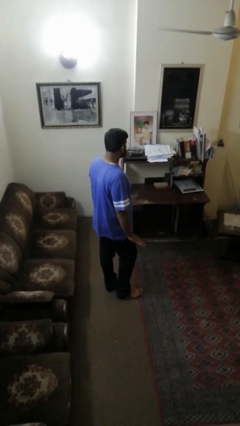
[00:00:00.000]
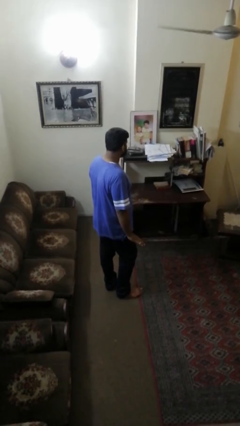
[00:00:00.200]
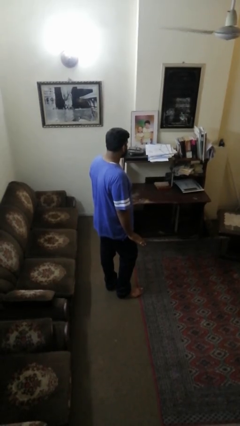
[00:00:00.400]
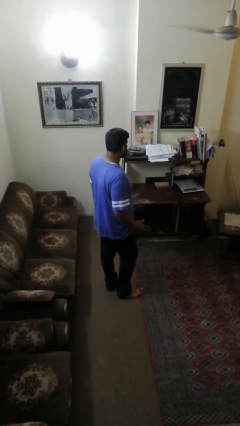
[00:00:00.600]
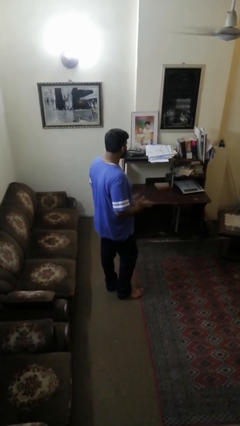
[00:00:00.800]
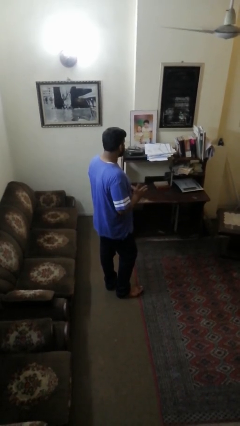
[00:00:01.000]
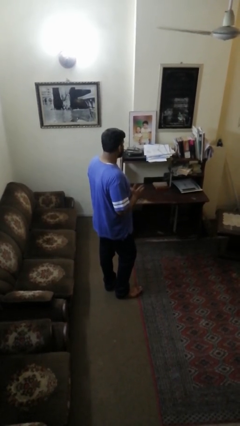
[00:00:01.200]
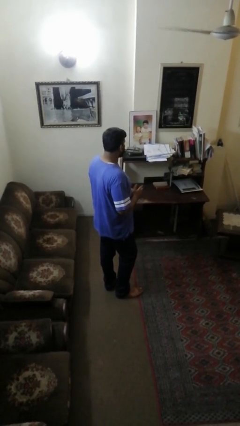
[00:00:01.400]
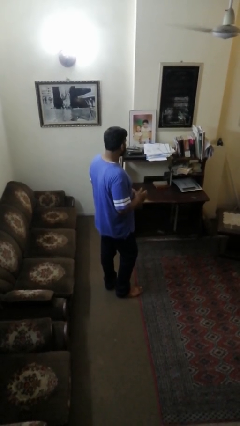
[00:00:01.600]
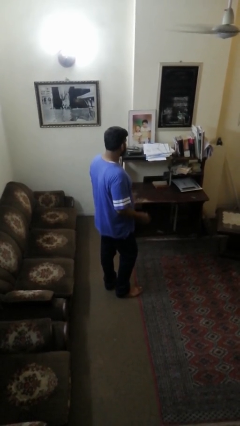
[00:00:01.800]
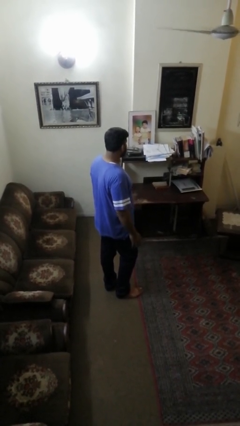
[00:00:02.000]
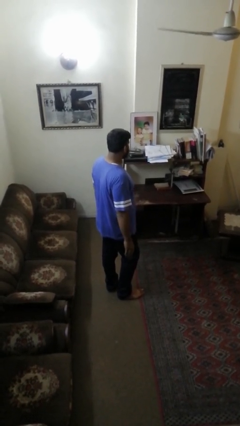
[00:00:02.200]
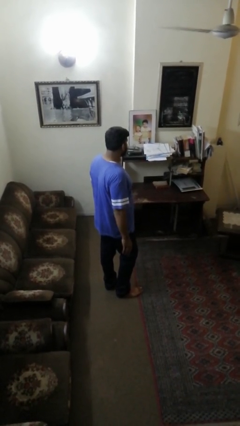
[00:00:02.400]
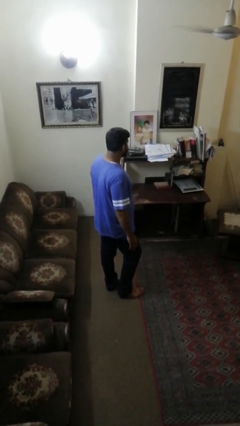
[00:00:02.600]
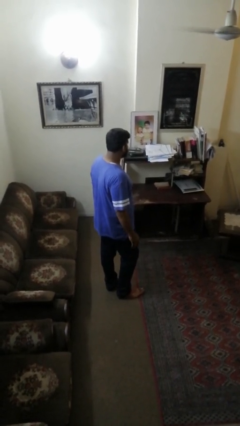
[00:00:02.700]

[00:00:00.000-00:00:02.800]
person takes off ring

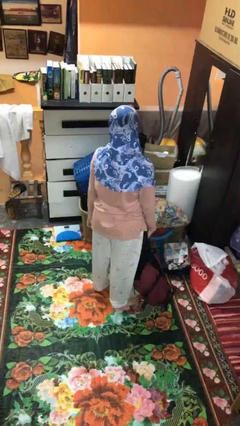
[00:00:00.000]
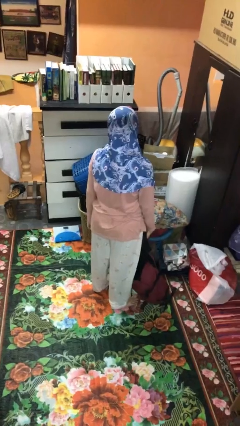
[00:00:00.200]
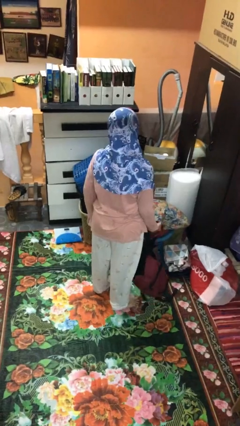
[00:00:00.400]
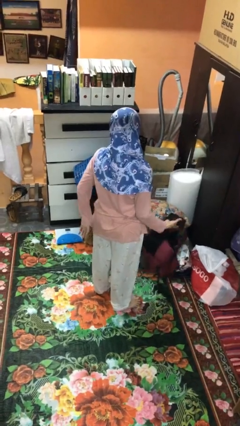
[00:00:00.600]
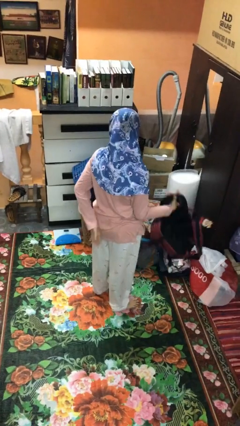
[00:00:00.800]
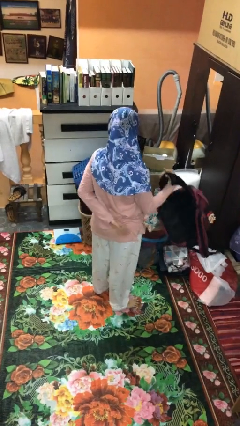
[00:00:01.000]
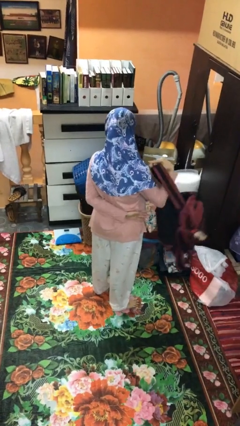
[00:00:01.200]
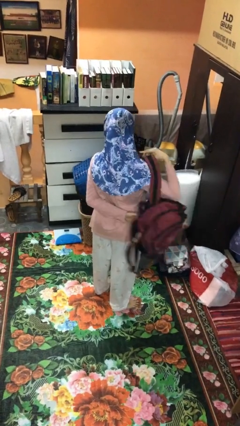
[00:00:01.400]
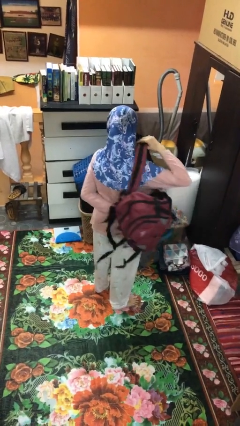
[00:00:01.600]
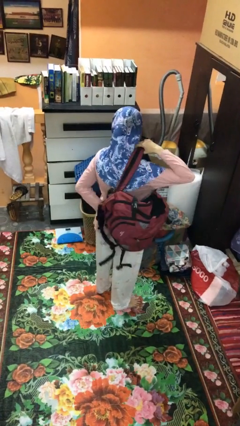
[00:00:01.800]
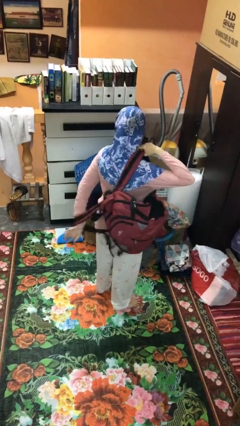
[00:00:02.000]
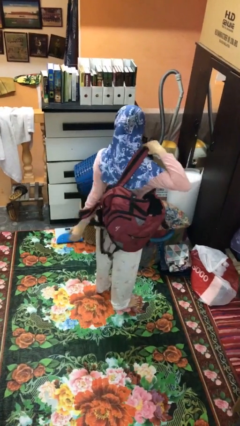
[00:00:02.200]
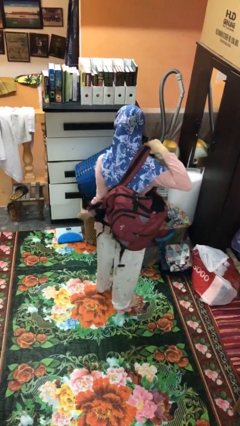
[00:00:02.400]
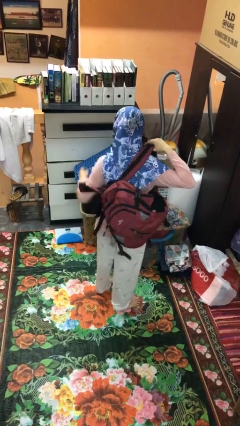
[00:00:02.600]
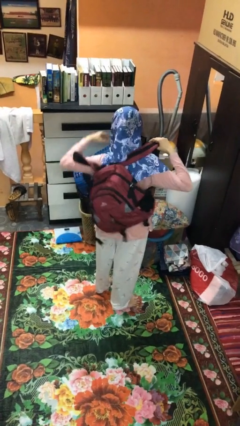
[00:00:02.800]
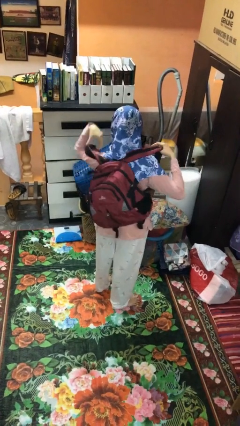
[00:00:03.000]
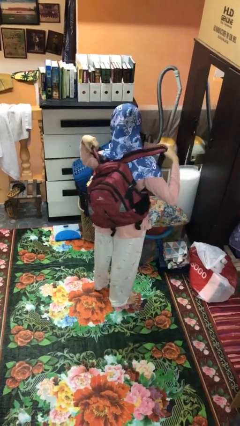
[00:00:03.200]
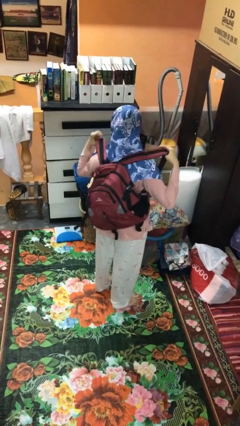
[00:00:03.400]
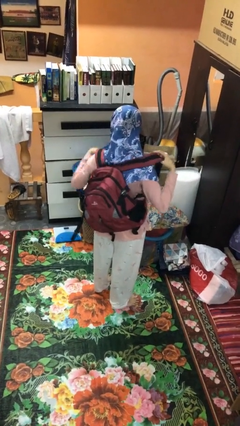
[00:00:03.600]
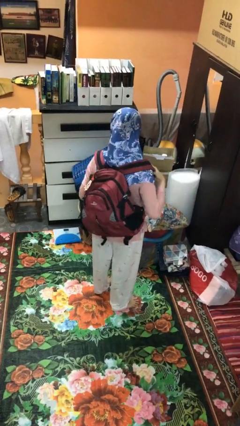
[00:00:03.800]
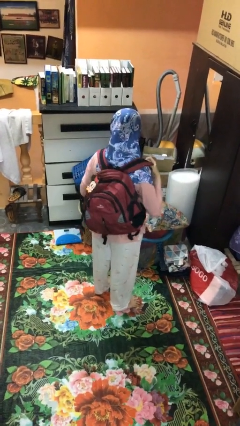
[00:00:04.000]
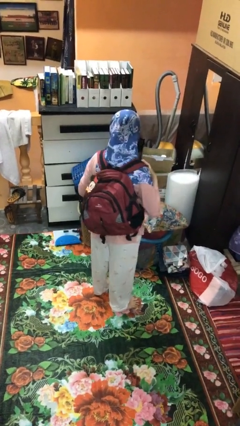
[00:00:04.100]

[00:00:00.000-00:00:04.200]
person puts on backpack

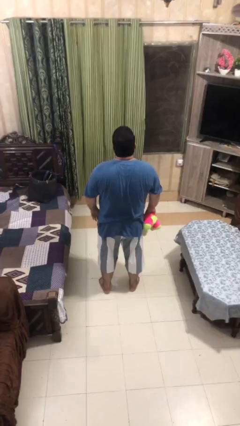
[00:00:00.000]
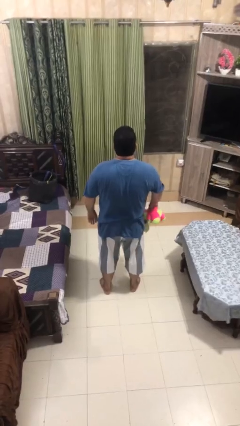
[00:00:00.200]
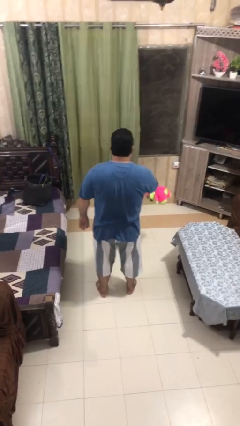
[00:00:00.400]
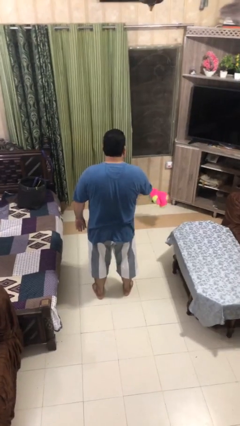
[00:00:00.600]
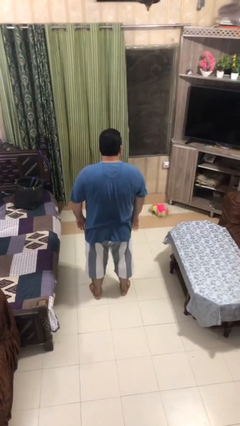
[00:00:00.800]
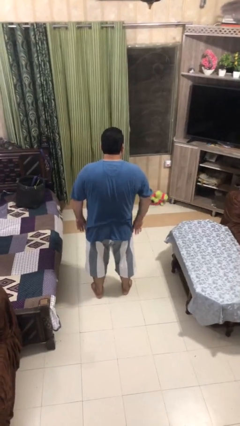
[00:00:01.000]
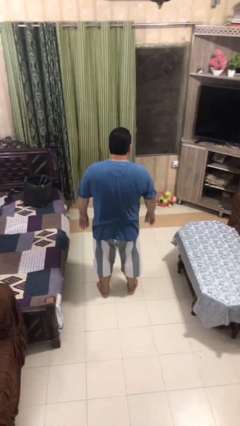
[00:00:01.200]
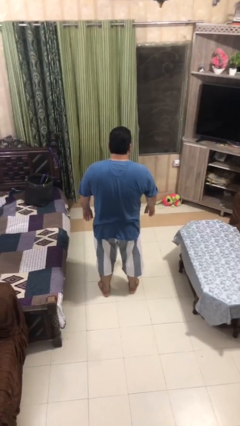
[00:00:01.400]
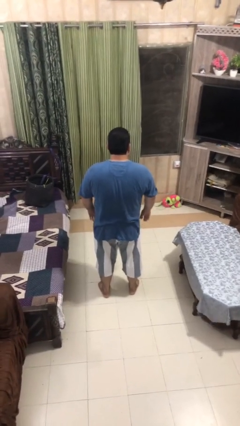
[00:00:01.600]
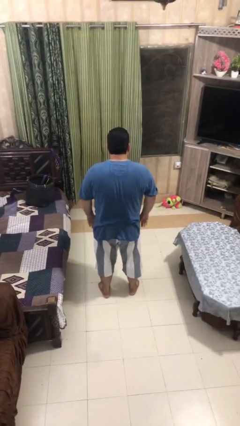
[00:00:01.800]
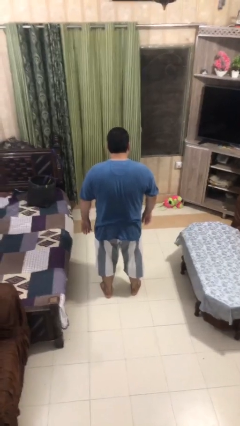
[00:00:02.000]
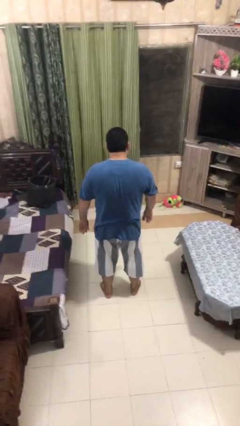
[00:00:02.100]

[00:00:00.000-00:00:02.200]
person throws object to ground

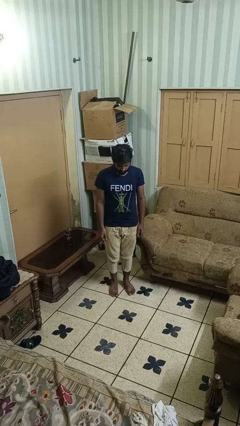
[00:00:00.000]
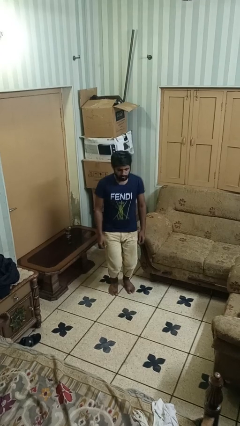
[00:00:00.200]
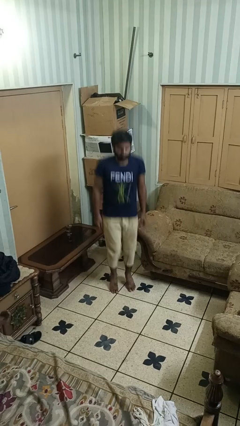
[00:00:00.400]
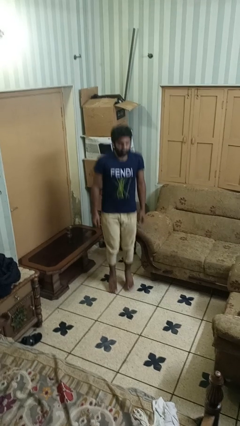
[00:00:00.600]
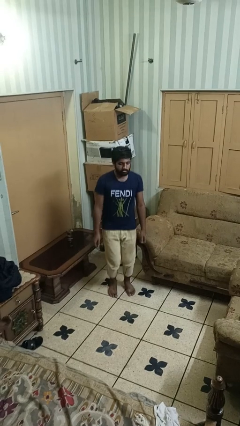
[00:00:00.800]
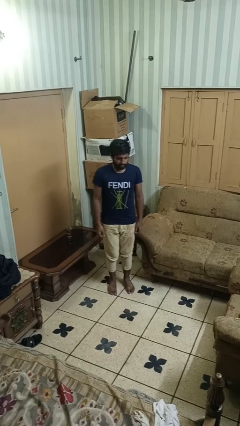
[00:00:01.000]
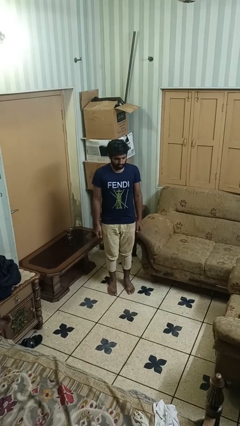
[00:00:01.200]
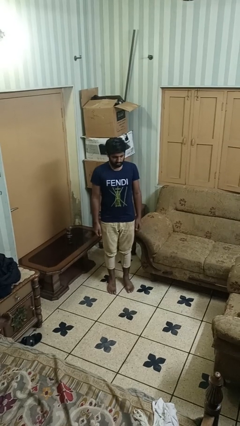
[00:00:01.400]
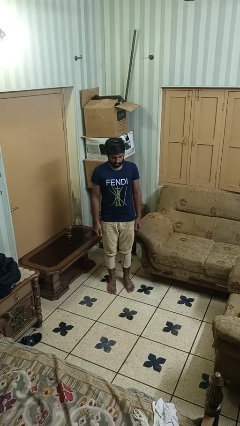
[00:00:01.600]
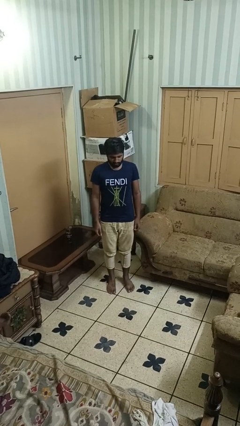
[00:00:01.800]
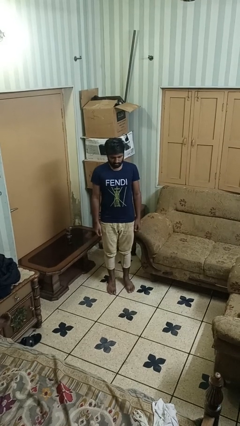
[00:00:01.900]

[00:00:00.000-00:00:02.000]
person jumps

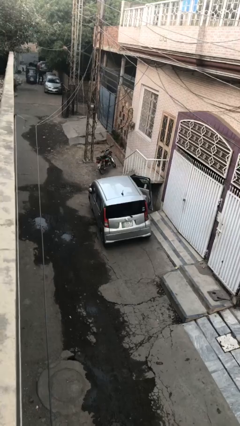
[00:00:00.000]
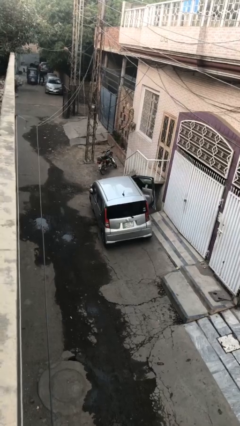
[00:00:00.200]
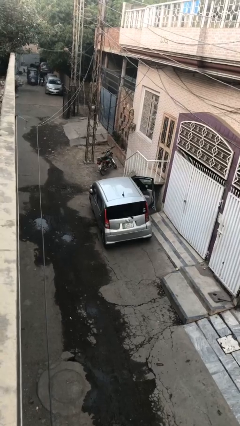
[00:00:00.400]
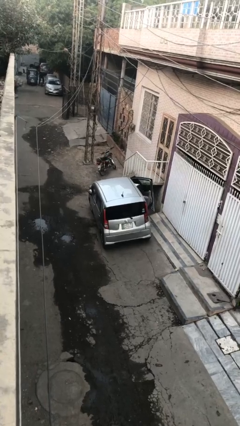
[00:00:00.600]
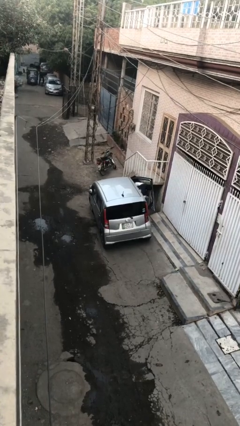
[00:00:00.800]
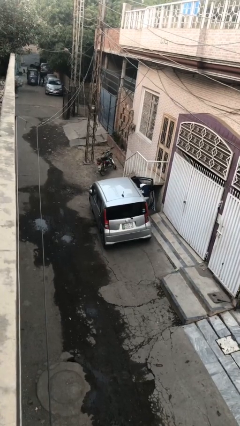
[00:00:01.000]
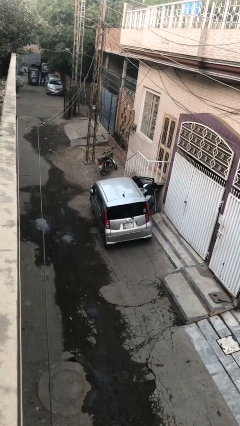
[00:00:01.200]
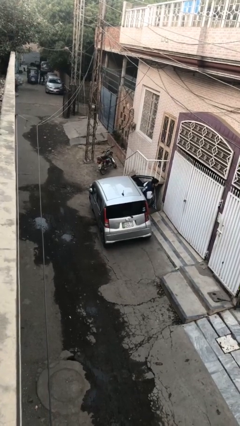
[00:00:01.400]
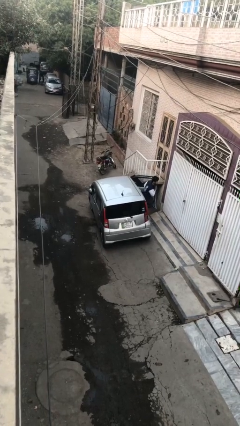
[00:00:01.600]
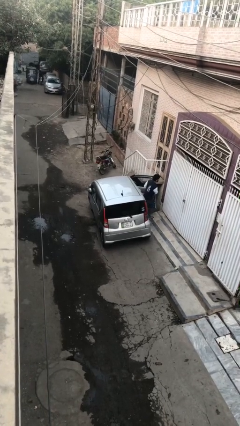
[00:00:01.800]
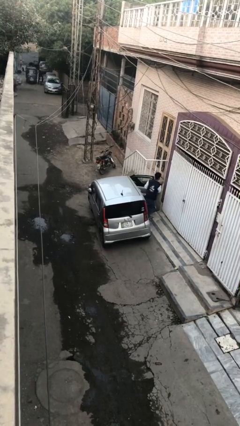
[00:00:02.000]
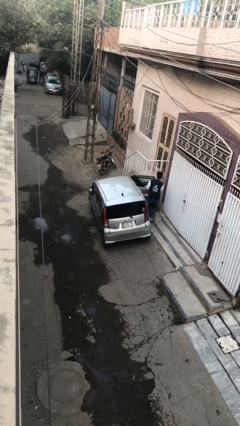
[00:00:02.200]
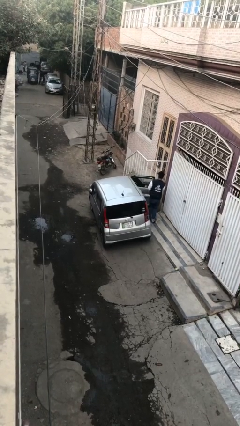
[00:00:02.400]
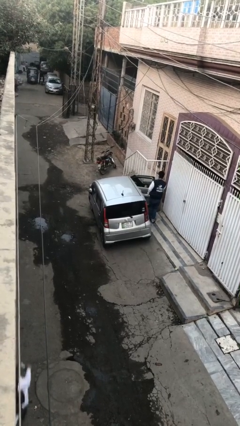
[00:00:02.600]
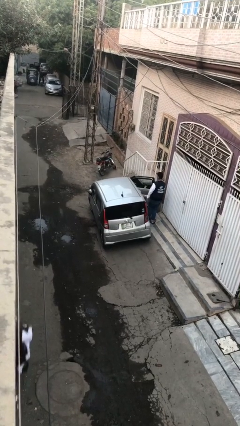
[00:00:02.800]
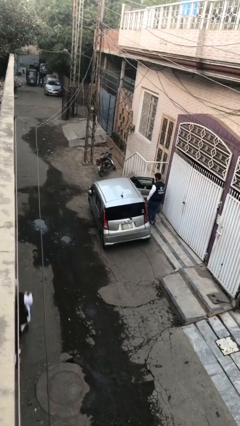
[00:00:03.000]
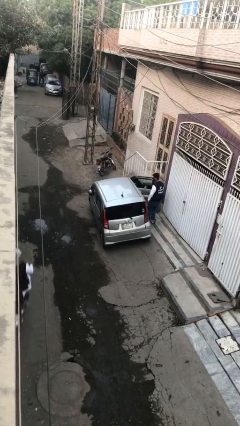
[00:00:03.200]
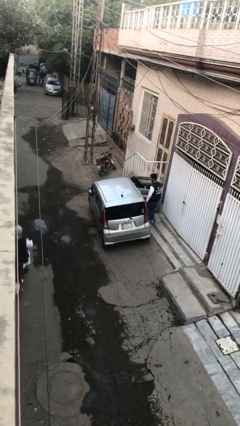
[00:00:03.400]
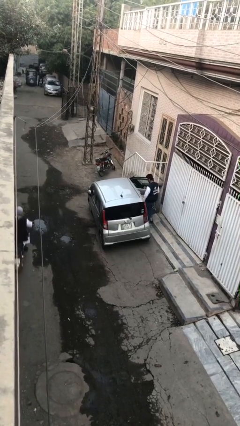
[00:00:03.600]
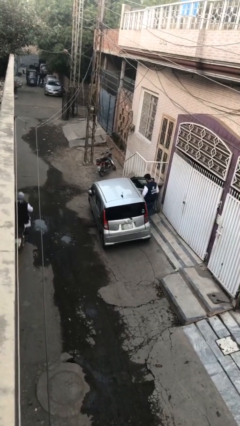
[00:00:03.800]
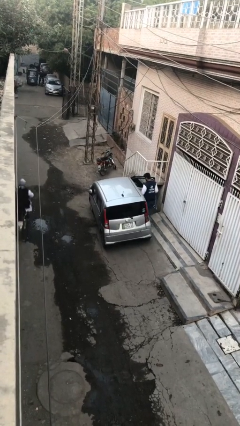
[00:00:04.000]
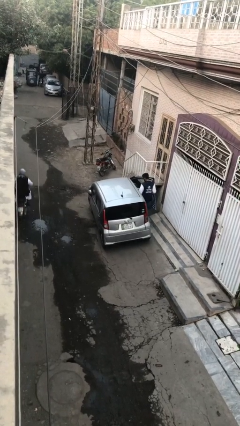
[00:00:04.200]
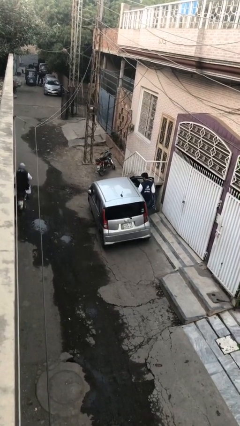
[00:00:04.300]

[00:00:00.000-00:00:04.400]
car drops off person

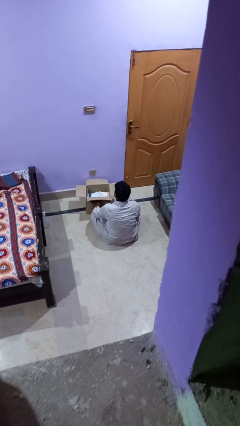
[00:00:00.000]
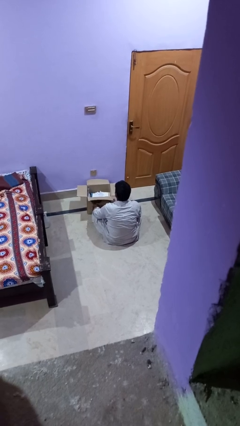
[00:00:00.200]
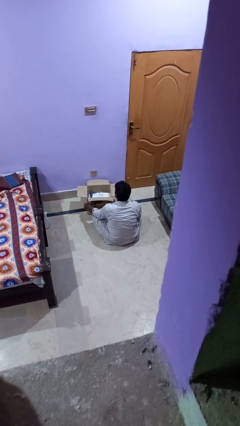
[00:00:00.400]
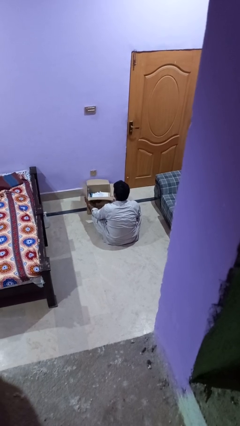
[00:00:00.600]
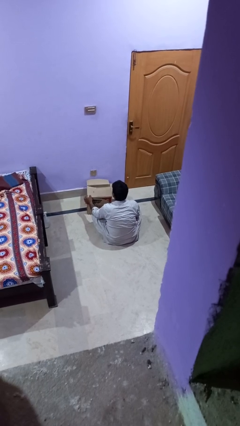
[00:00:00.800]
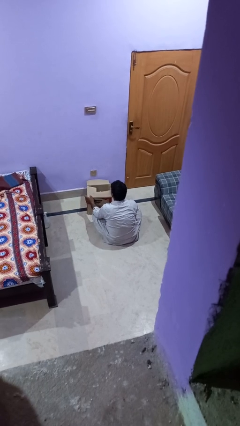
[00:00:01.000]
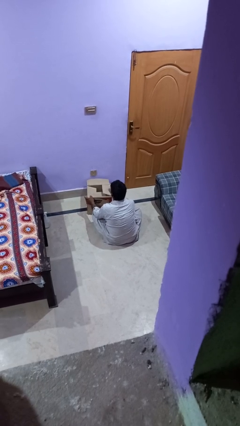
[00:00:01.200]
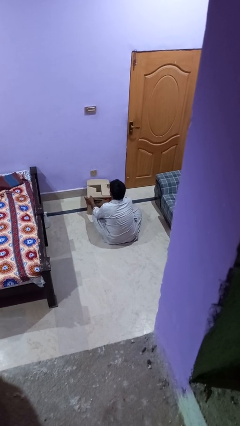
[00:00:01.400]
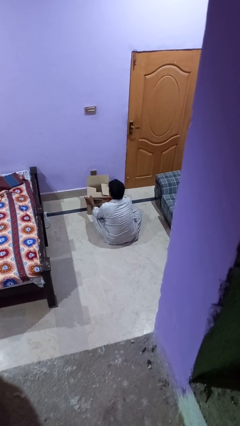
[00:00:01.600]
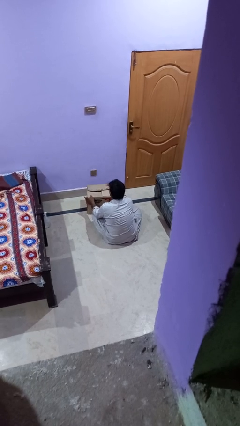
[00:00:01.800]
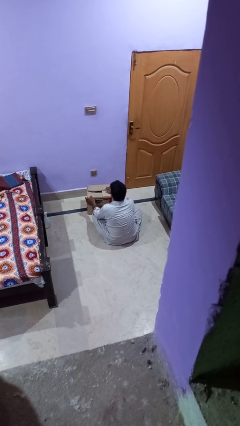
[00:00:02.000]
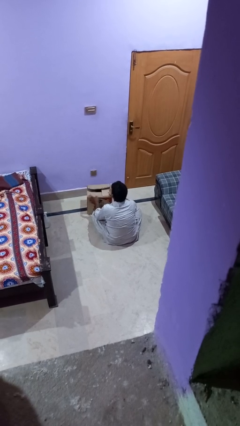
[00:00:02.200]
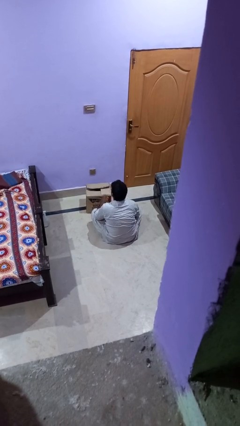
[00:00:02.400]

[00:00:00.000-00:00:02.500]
person closes box
